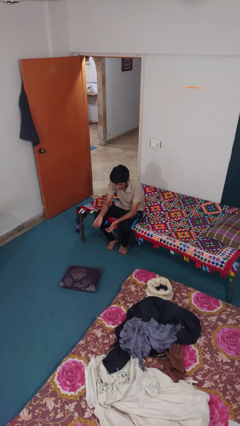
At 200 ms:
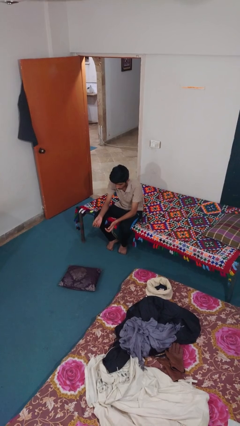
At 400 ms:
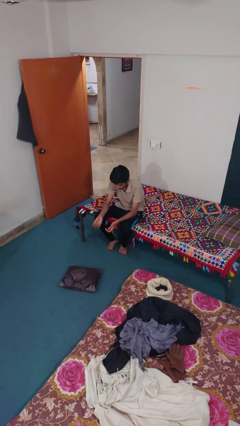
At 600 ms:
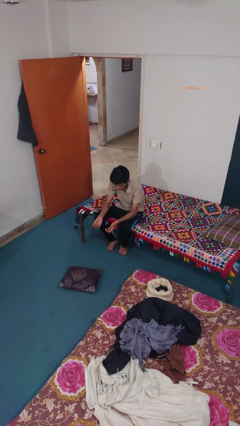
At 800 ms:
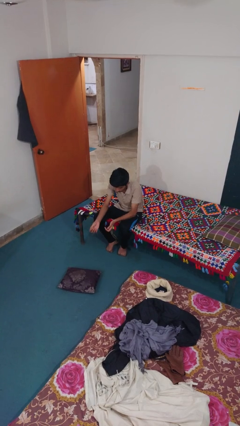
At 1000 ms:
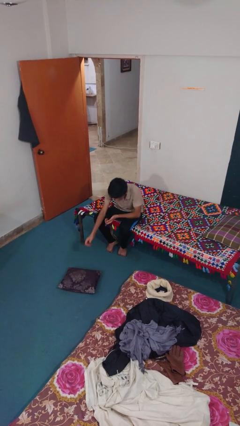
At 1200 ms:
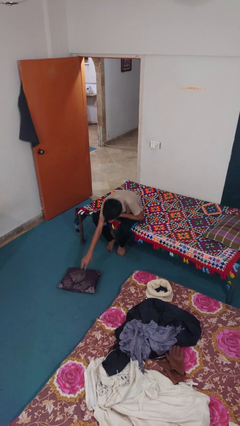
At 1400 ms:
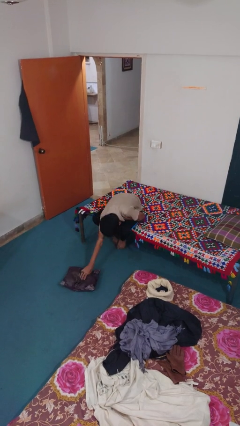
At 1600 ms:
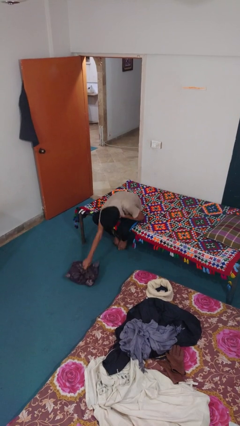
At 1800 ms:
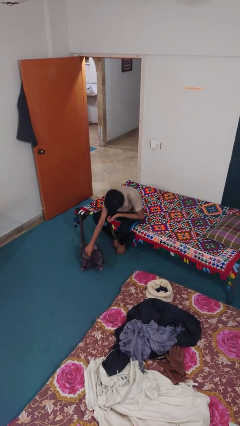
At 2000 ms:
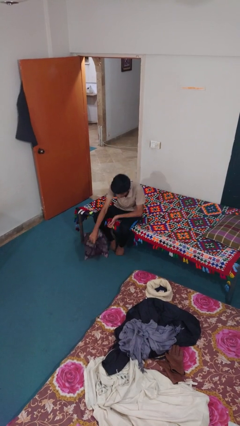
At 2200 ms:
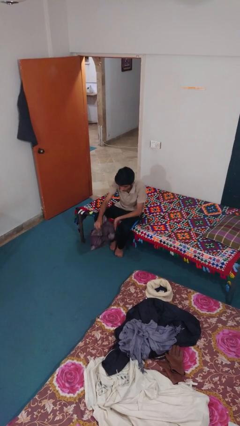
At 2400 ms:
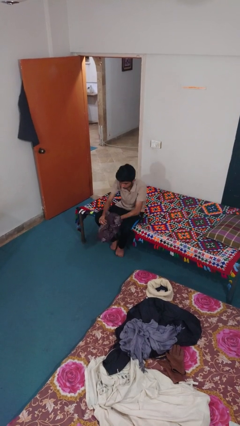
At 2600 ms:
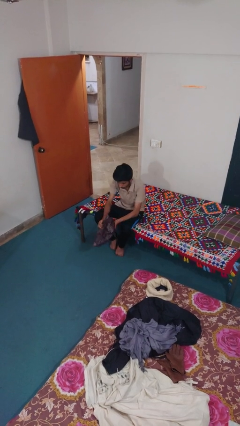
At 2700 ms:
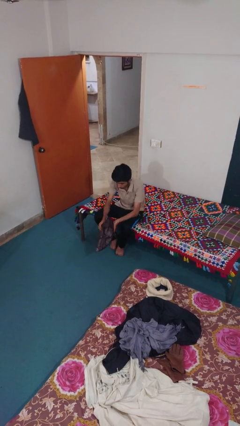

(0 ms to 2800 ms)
person picks up object from floor

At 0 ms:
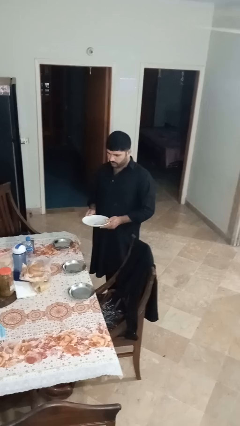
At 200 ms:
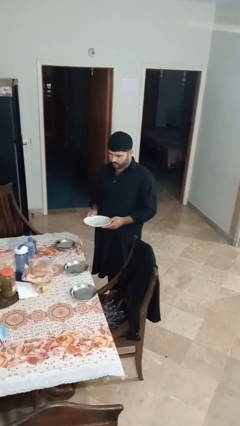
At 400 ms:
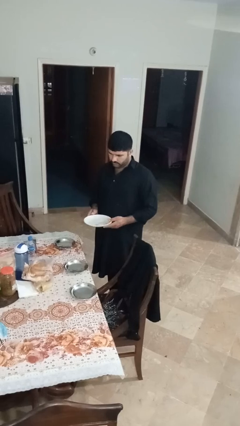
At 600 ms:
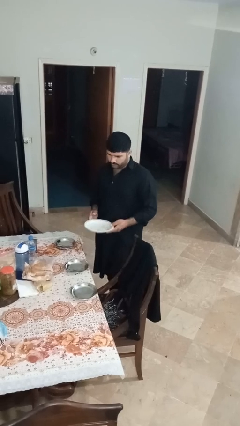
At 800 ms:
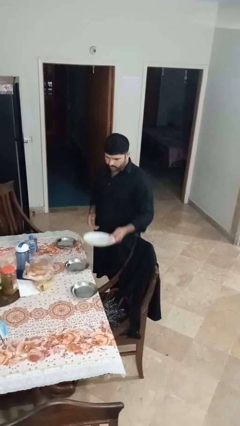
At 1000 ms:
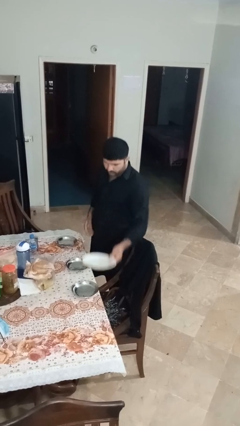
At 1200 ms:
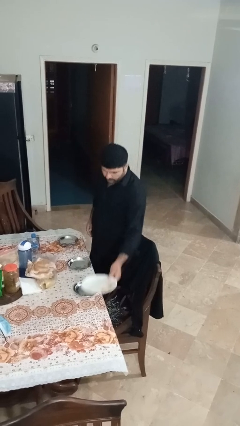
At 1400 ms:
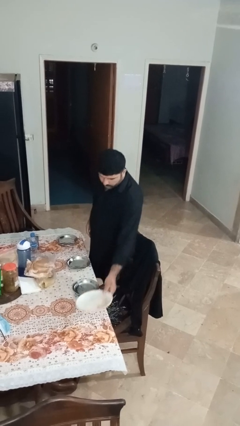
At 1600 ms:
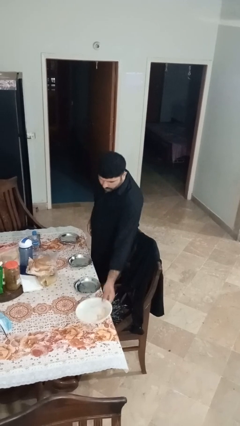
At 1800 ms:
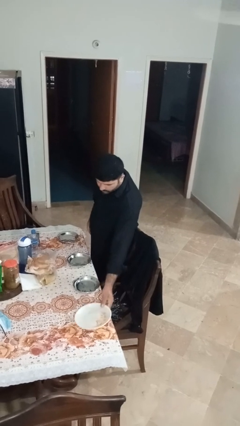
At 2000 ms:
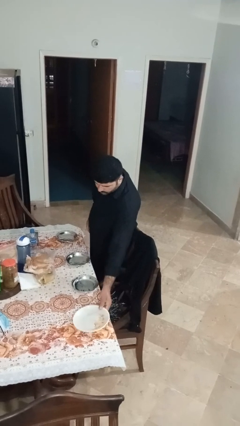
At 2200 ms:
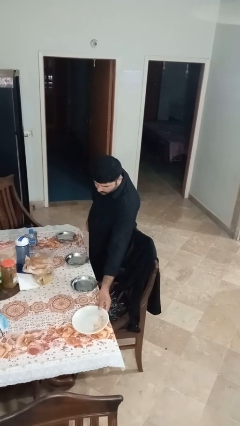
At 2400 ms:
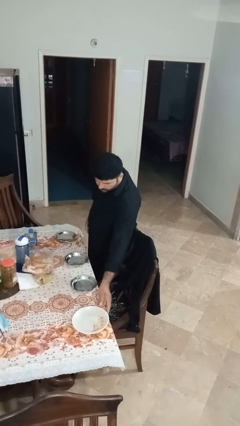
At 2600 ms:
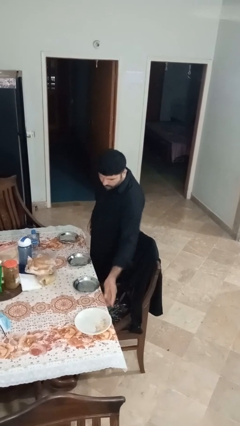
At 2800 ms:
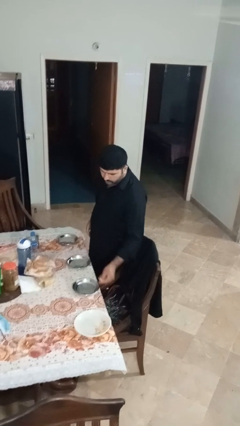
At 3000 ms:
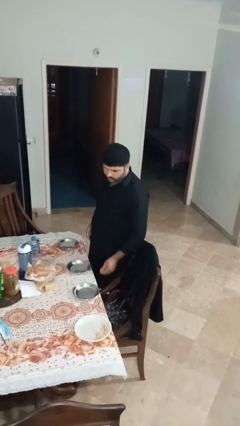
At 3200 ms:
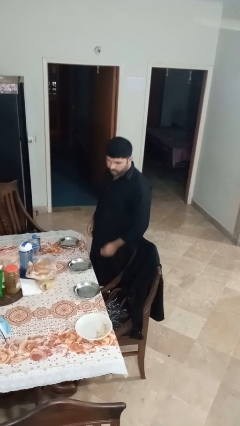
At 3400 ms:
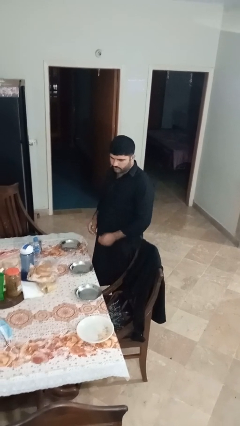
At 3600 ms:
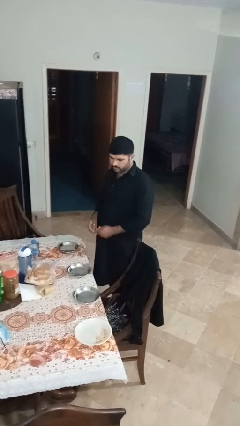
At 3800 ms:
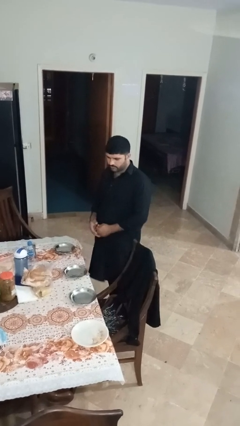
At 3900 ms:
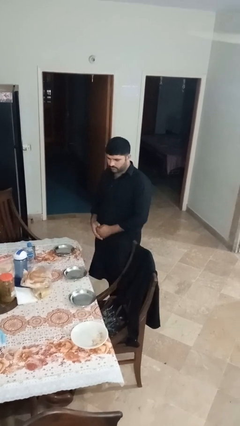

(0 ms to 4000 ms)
person sets table

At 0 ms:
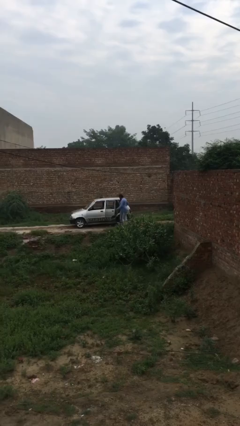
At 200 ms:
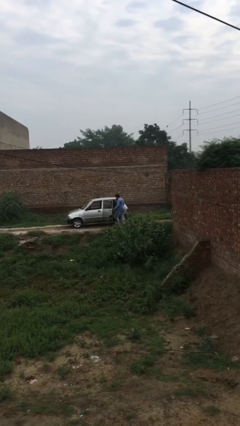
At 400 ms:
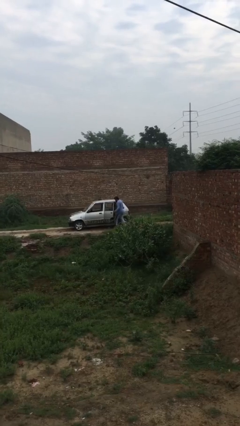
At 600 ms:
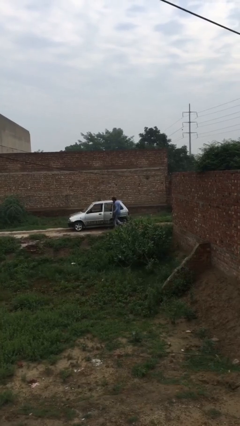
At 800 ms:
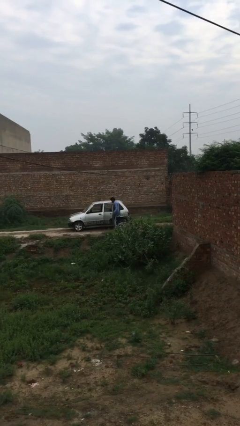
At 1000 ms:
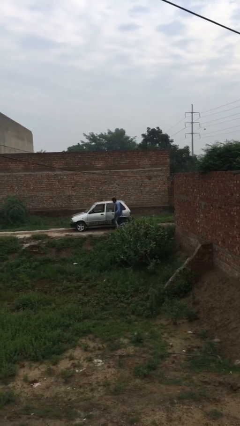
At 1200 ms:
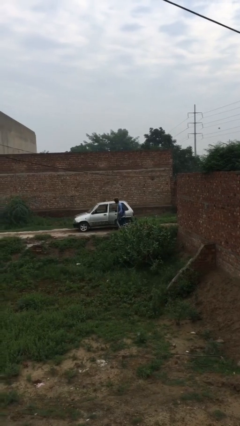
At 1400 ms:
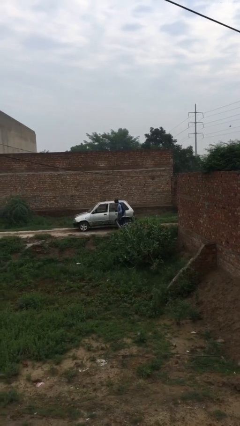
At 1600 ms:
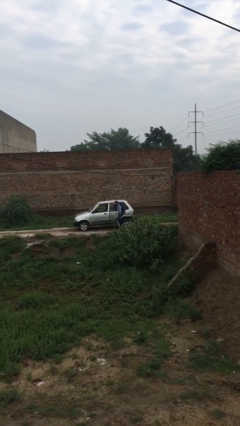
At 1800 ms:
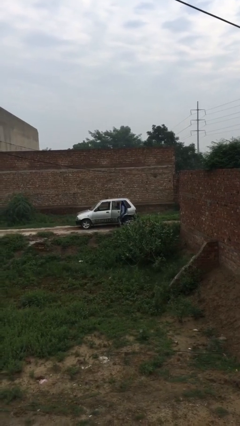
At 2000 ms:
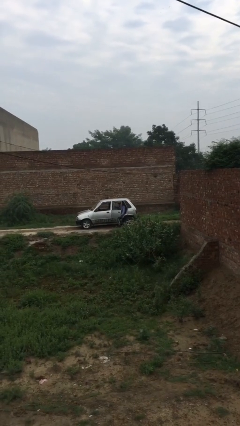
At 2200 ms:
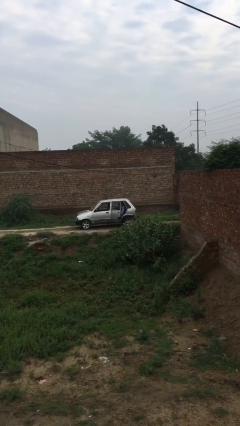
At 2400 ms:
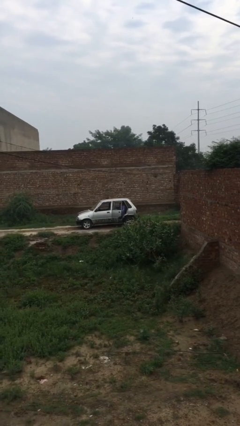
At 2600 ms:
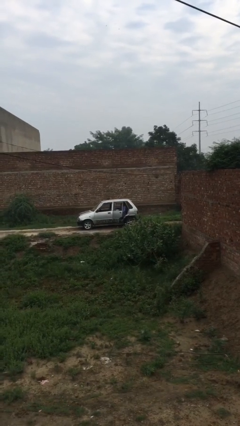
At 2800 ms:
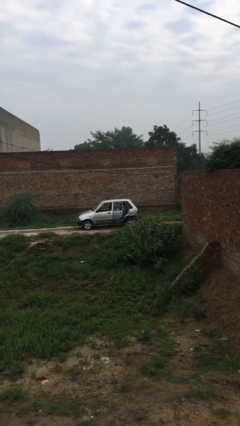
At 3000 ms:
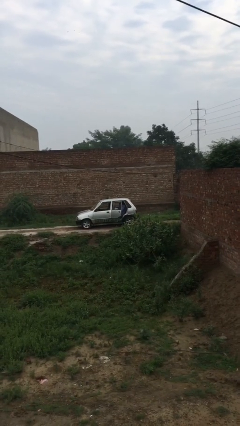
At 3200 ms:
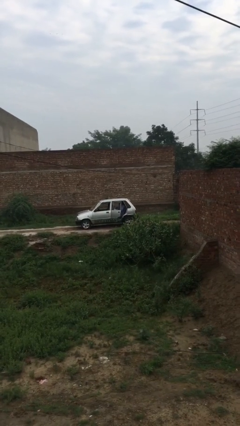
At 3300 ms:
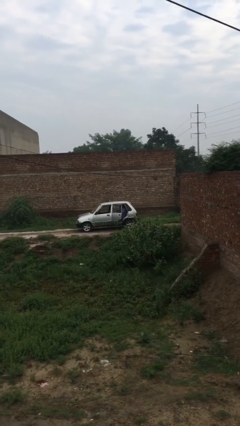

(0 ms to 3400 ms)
person enters car

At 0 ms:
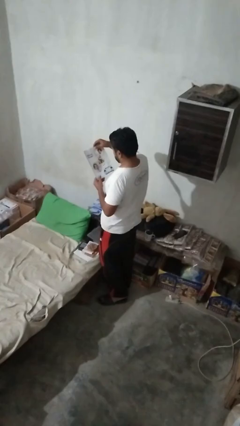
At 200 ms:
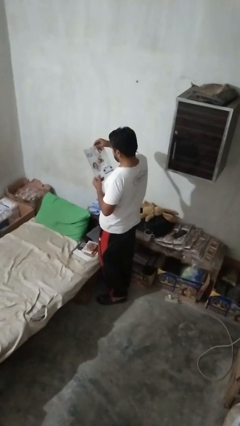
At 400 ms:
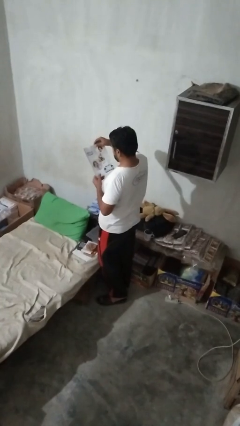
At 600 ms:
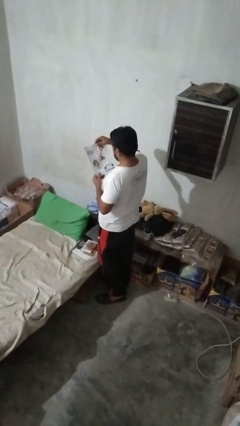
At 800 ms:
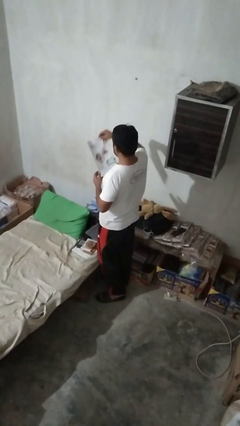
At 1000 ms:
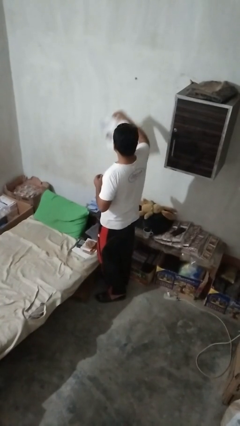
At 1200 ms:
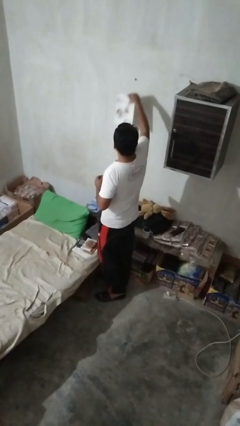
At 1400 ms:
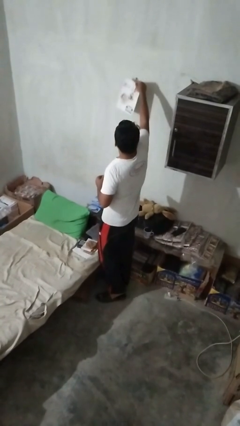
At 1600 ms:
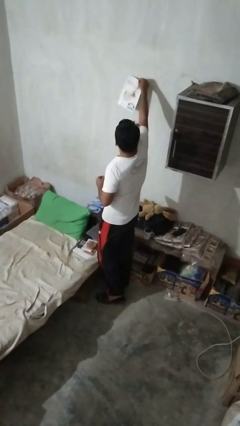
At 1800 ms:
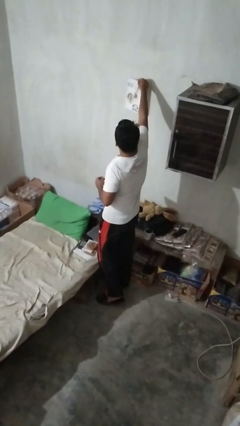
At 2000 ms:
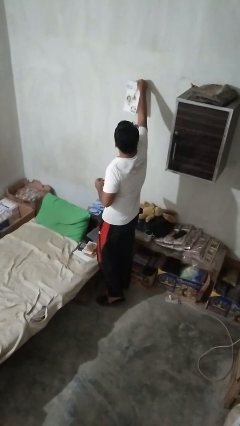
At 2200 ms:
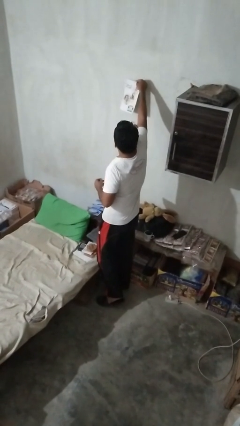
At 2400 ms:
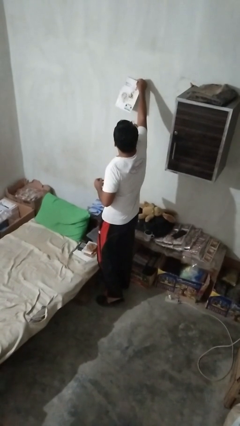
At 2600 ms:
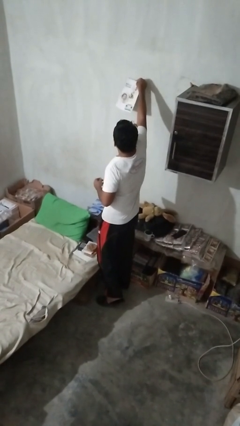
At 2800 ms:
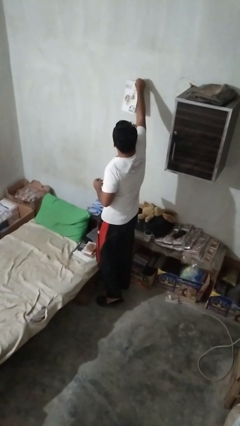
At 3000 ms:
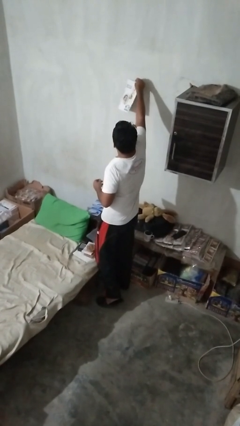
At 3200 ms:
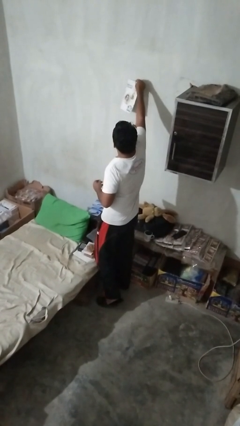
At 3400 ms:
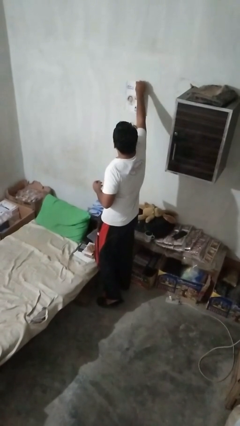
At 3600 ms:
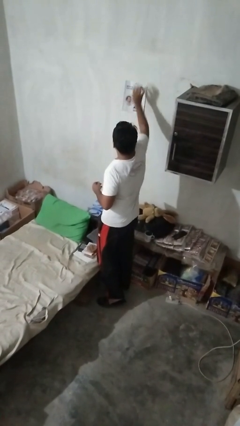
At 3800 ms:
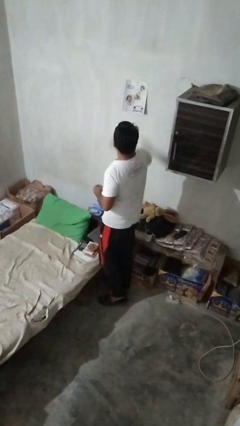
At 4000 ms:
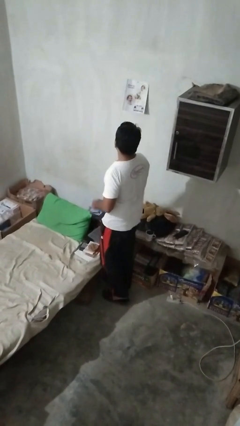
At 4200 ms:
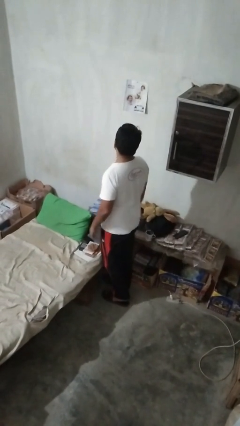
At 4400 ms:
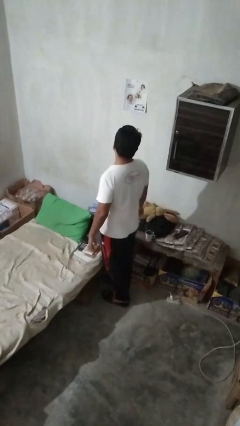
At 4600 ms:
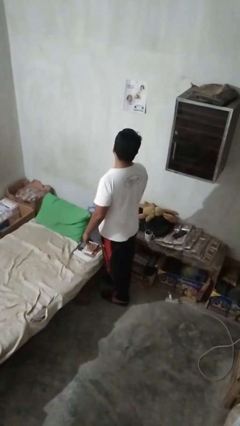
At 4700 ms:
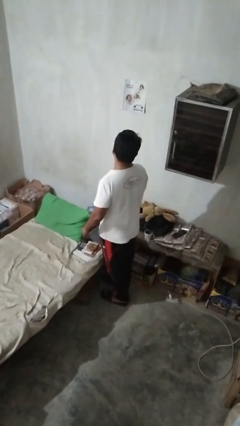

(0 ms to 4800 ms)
person puts up picture frame

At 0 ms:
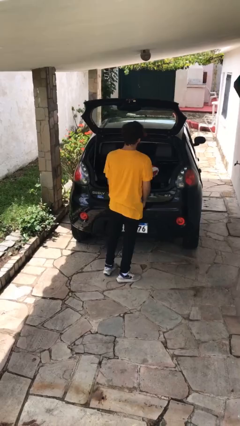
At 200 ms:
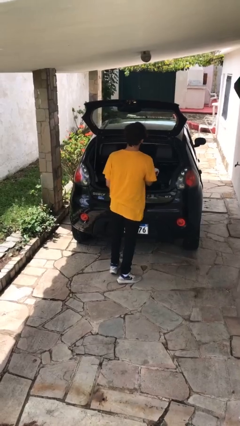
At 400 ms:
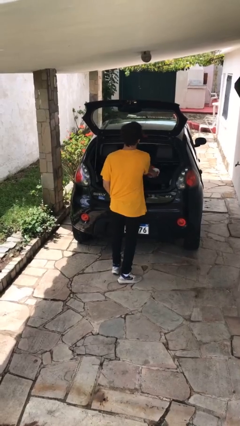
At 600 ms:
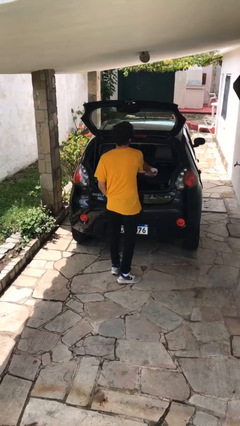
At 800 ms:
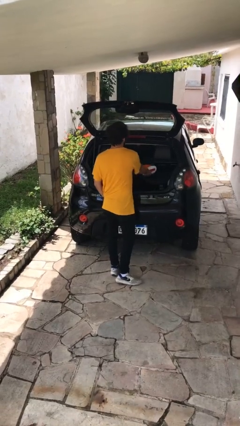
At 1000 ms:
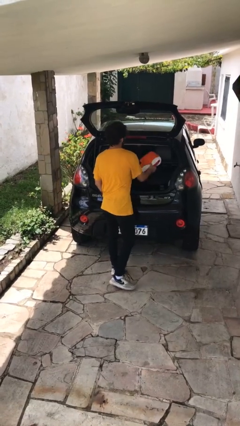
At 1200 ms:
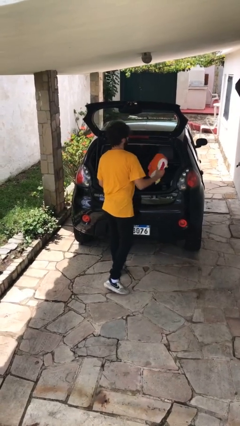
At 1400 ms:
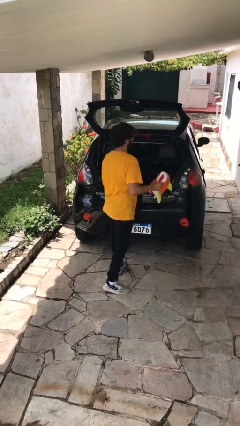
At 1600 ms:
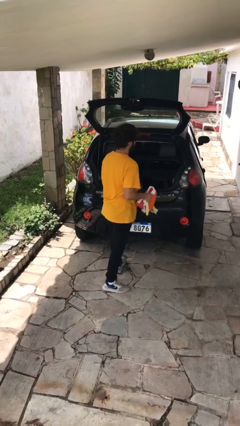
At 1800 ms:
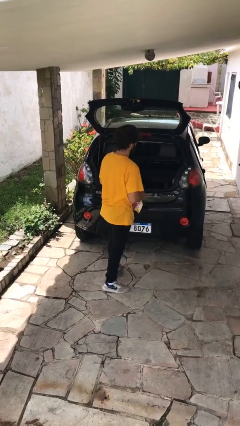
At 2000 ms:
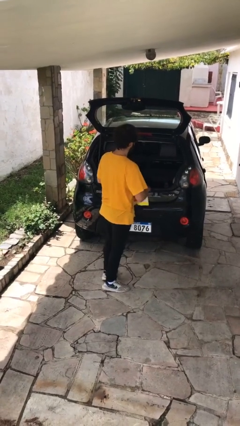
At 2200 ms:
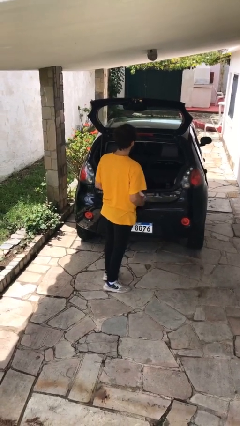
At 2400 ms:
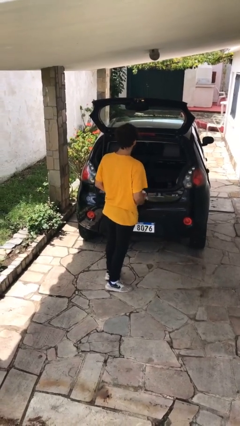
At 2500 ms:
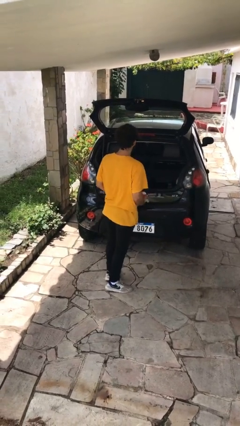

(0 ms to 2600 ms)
person unloads car
